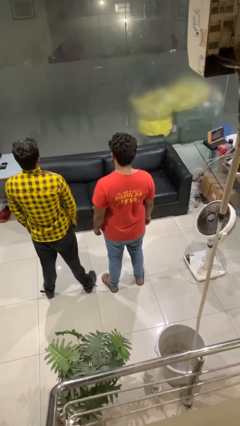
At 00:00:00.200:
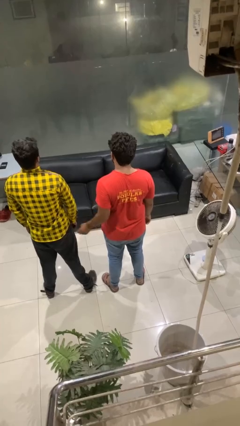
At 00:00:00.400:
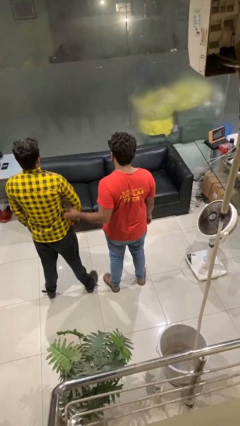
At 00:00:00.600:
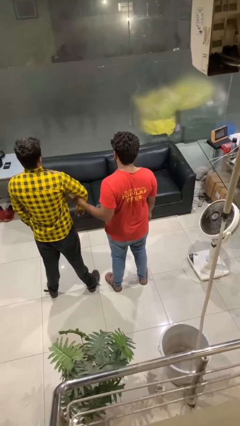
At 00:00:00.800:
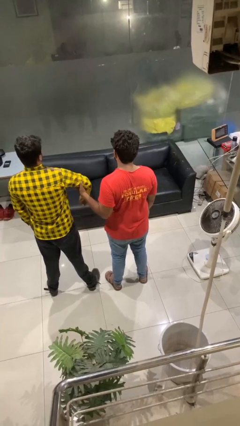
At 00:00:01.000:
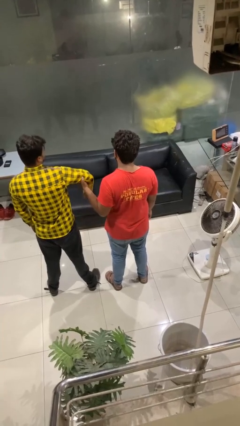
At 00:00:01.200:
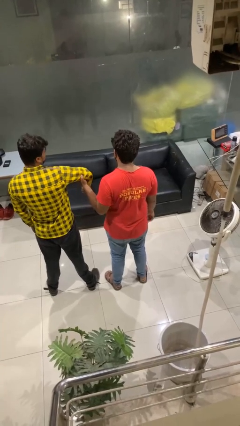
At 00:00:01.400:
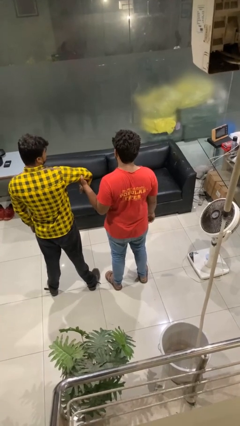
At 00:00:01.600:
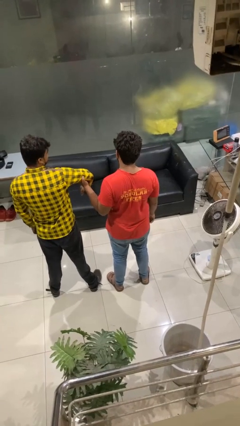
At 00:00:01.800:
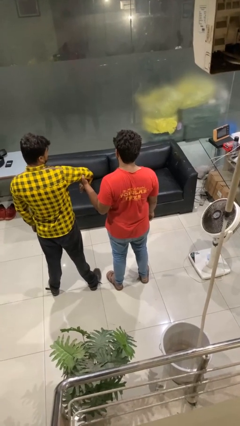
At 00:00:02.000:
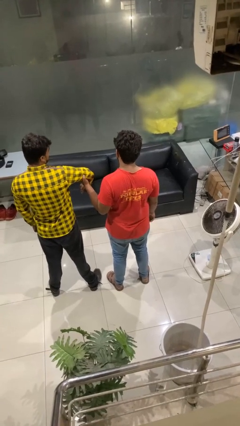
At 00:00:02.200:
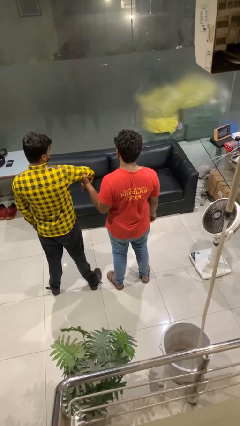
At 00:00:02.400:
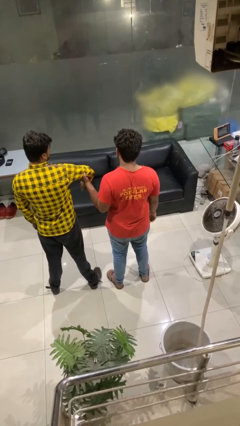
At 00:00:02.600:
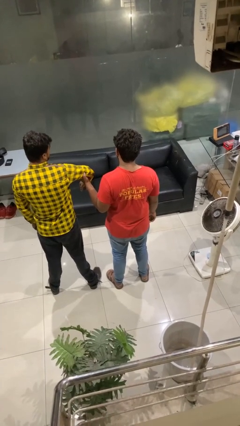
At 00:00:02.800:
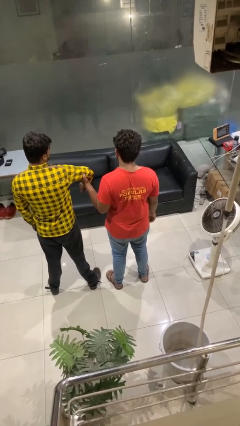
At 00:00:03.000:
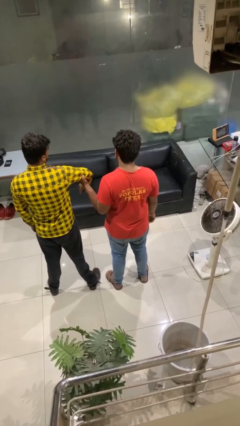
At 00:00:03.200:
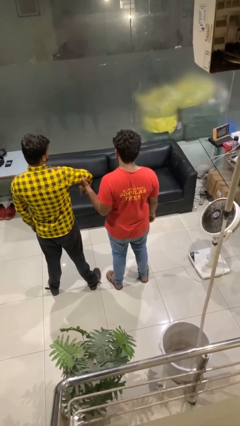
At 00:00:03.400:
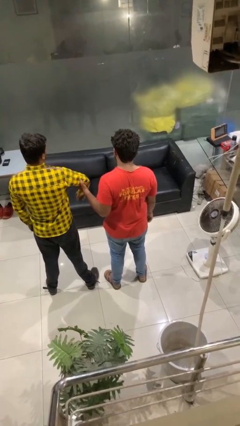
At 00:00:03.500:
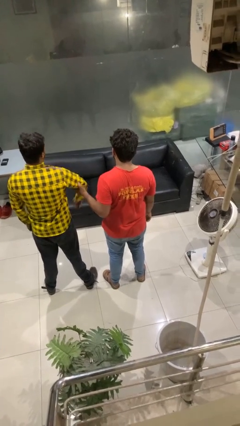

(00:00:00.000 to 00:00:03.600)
person grabs person by bicep

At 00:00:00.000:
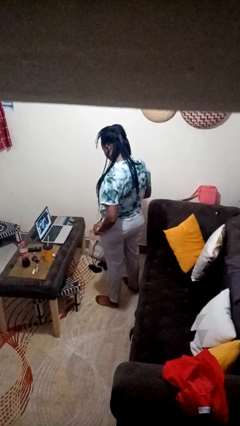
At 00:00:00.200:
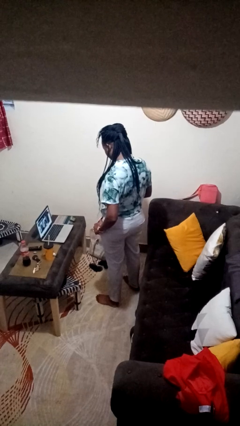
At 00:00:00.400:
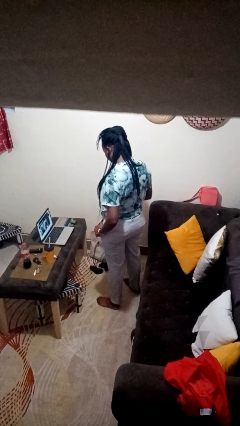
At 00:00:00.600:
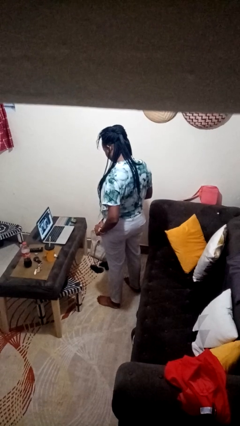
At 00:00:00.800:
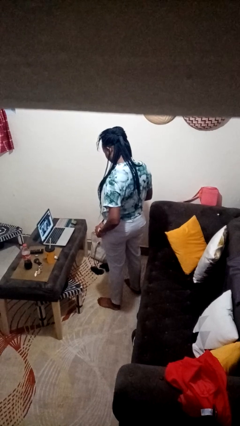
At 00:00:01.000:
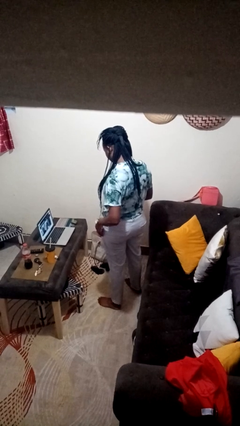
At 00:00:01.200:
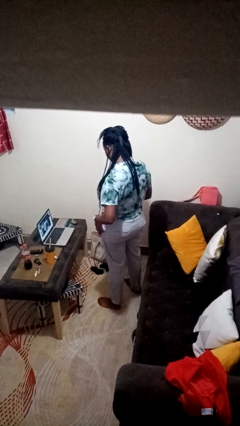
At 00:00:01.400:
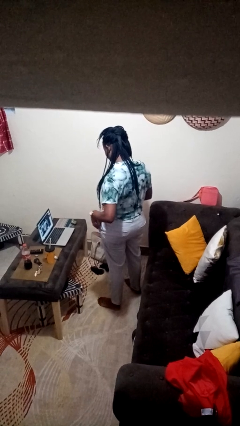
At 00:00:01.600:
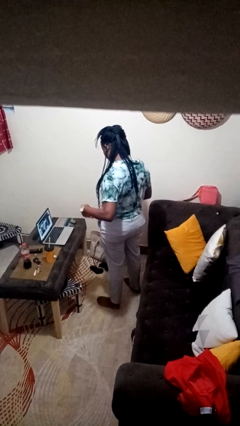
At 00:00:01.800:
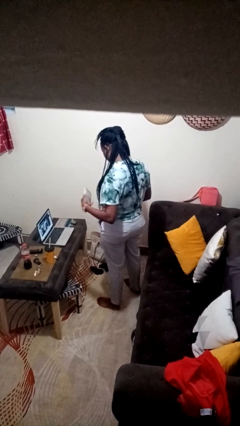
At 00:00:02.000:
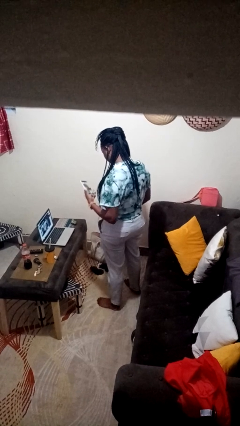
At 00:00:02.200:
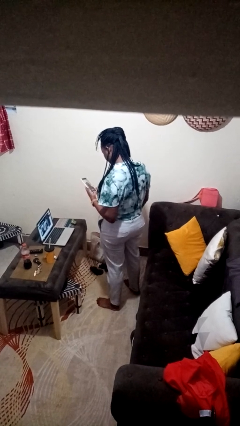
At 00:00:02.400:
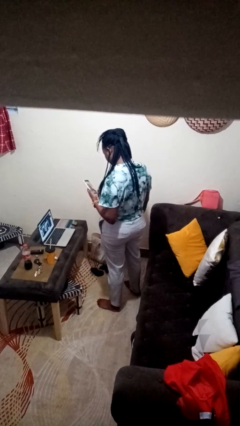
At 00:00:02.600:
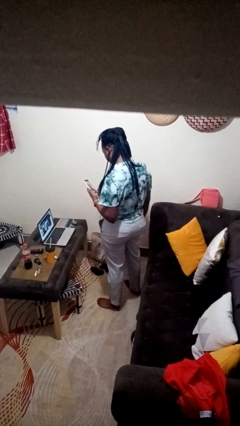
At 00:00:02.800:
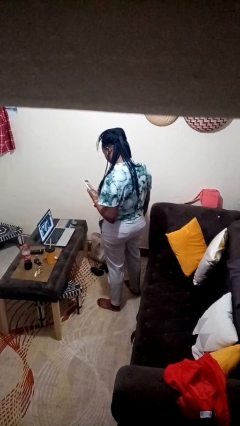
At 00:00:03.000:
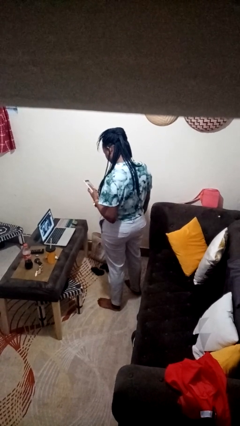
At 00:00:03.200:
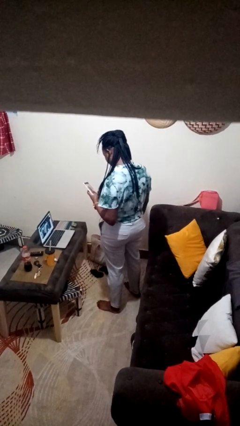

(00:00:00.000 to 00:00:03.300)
person takes phone from pocket

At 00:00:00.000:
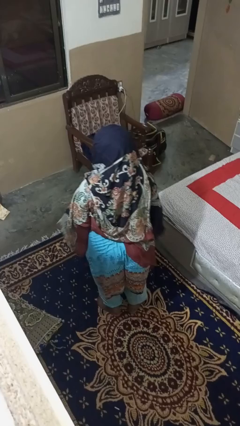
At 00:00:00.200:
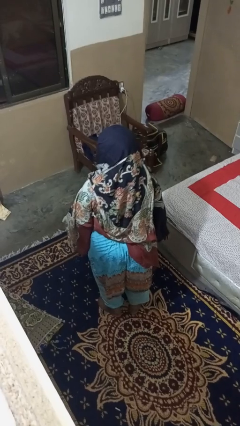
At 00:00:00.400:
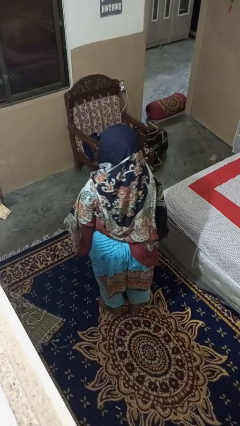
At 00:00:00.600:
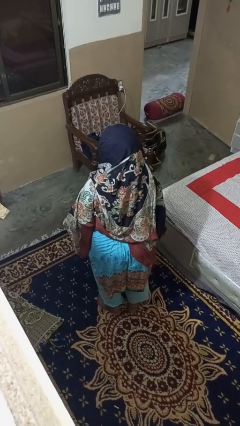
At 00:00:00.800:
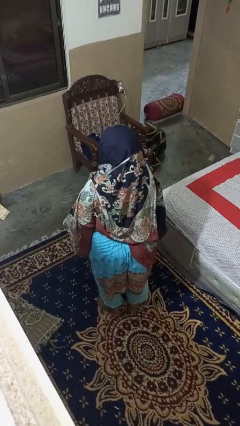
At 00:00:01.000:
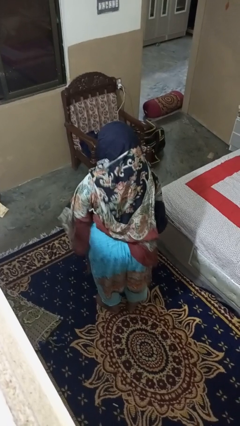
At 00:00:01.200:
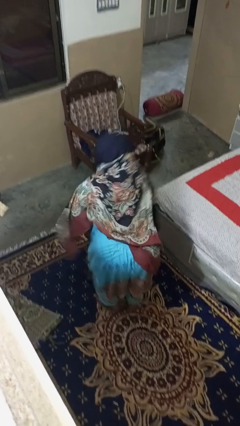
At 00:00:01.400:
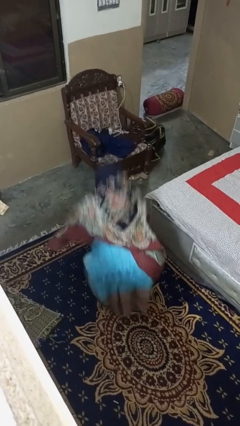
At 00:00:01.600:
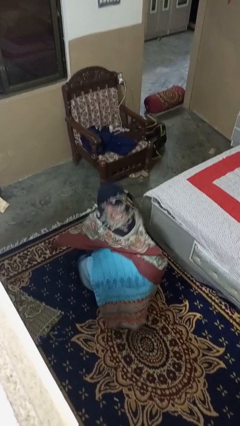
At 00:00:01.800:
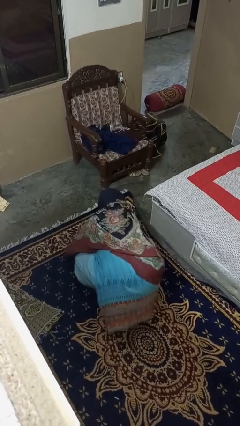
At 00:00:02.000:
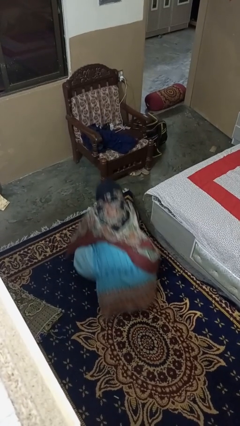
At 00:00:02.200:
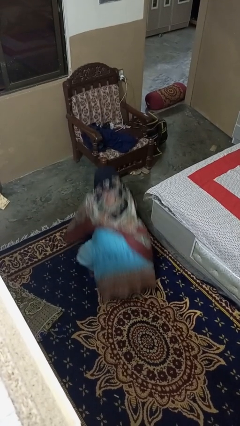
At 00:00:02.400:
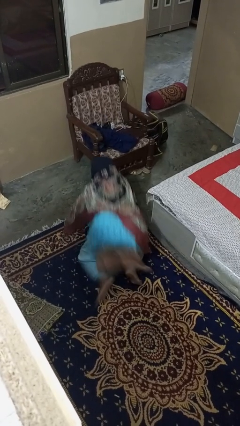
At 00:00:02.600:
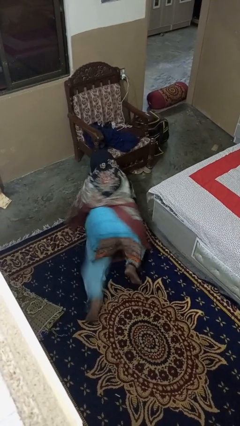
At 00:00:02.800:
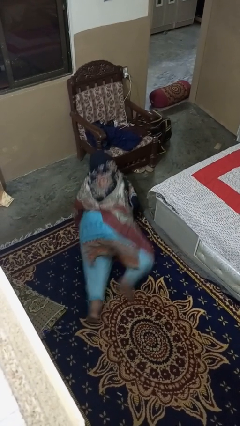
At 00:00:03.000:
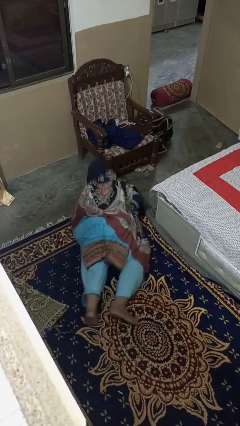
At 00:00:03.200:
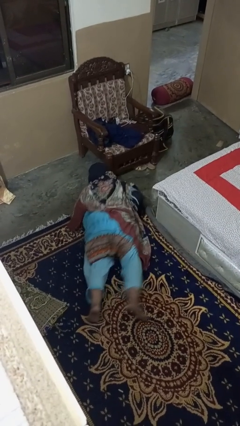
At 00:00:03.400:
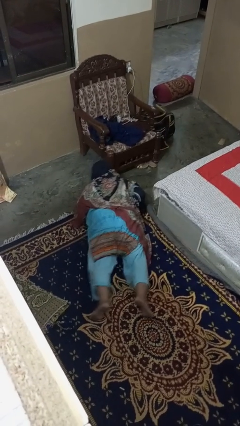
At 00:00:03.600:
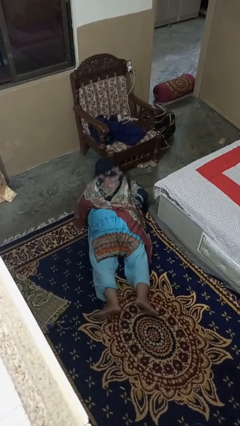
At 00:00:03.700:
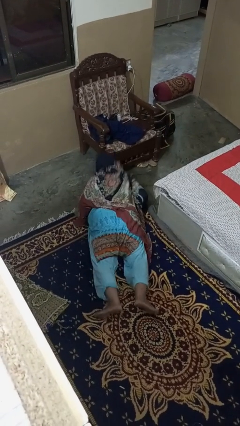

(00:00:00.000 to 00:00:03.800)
person exercises with pushup

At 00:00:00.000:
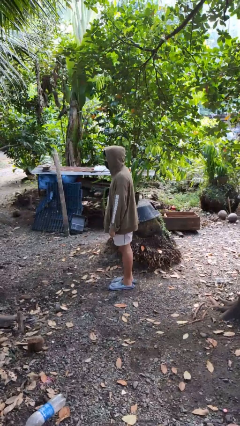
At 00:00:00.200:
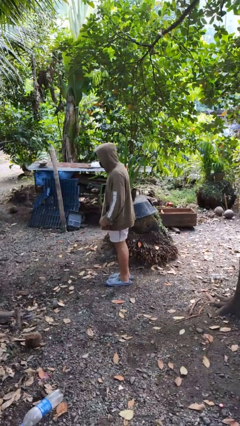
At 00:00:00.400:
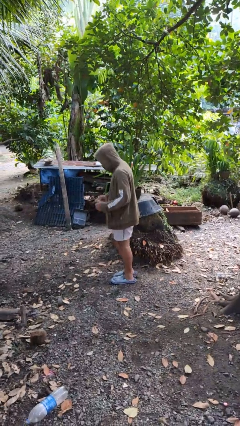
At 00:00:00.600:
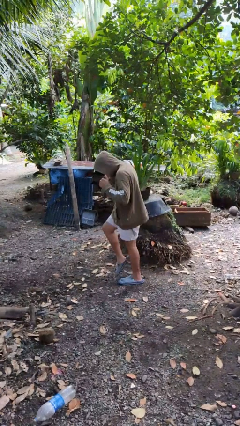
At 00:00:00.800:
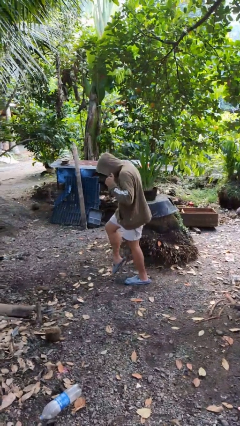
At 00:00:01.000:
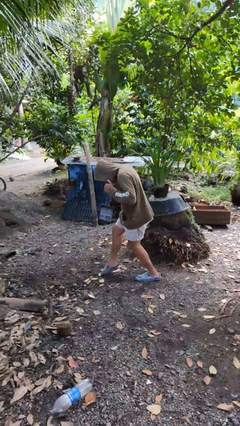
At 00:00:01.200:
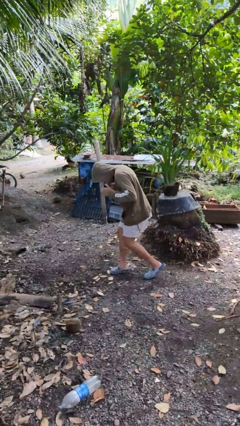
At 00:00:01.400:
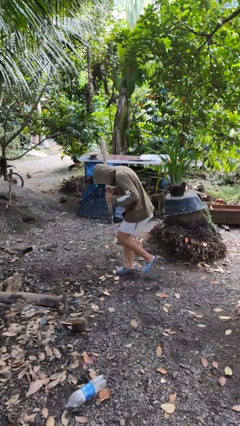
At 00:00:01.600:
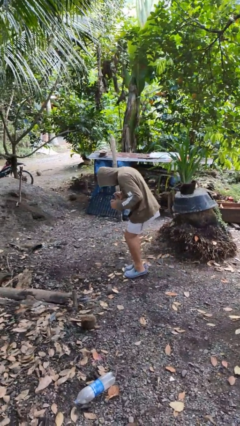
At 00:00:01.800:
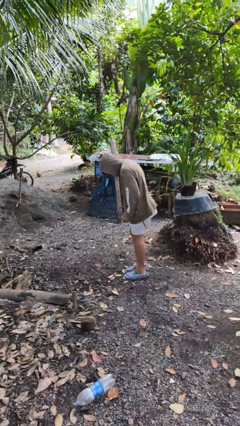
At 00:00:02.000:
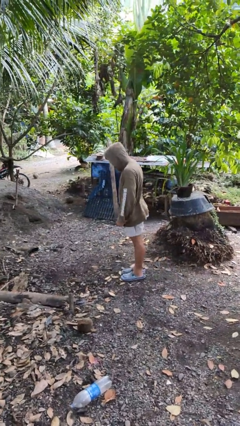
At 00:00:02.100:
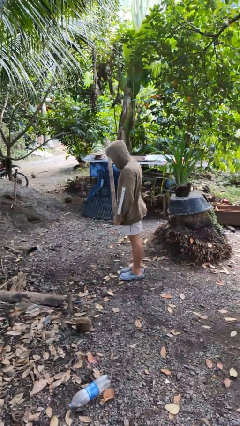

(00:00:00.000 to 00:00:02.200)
person walks tiptoe

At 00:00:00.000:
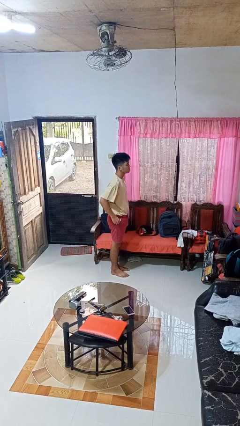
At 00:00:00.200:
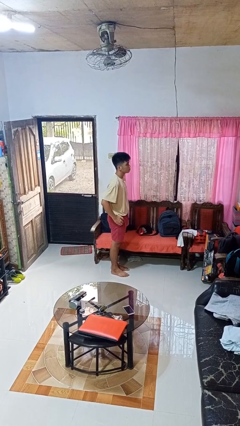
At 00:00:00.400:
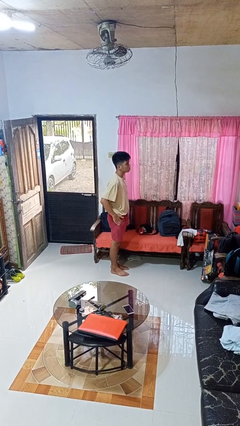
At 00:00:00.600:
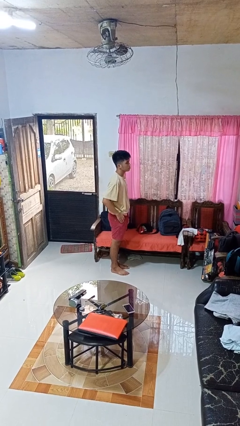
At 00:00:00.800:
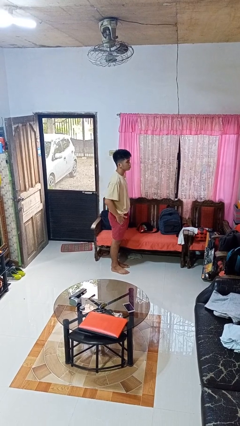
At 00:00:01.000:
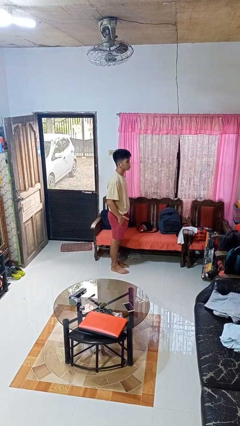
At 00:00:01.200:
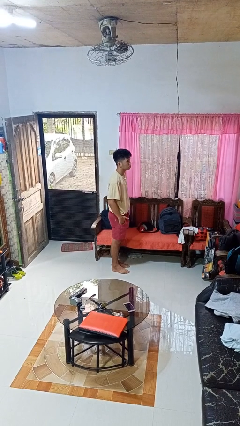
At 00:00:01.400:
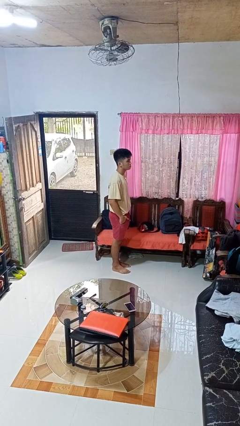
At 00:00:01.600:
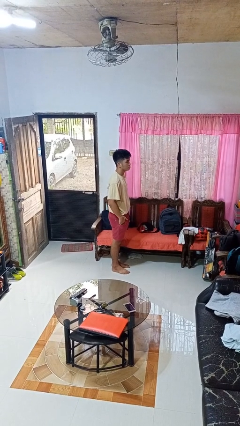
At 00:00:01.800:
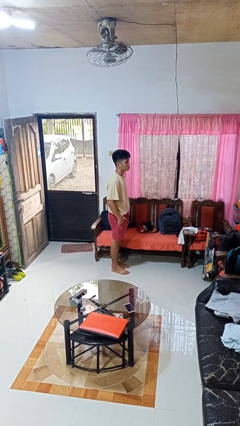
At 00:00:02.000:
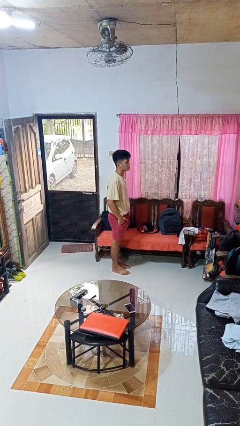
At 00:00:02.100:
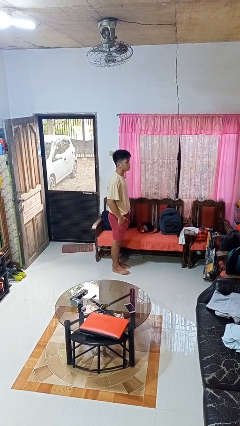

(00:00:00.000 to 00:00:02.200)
person puts hands in back pockets

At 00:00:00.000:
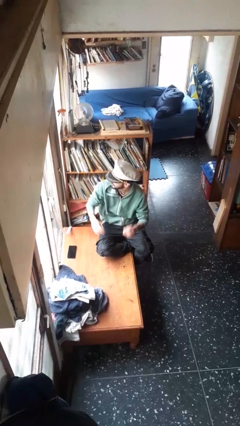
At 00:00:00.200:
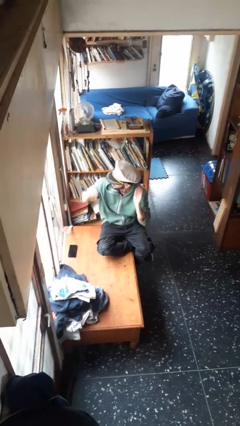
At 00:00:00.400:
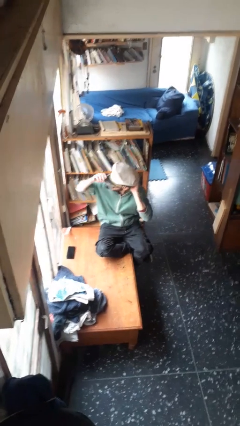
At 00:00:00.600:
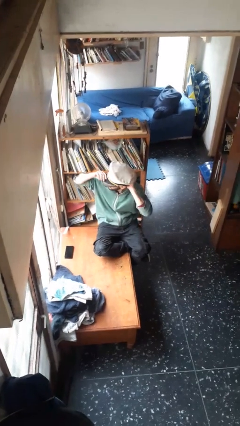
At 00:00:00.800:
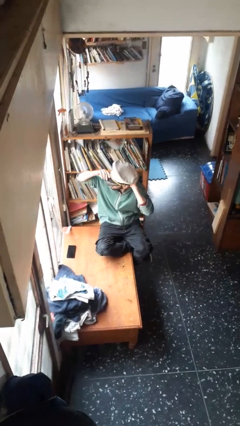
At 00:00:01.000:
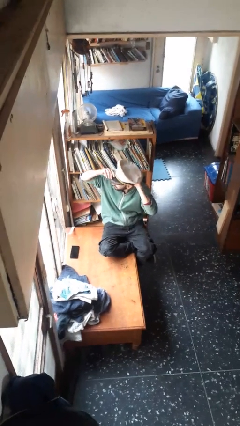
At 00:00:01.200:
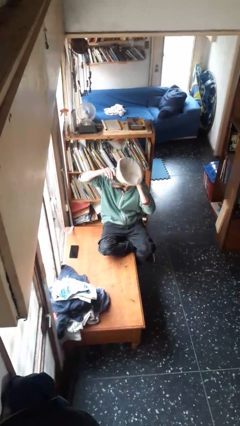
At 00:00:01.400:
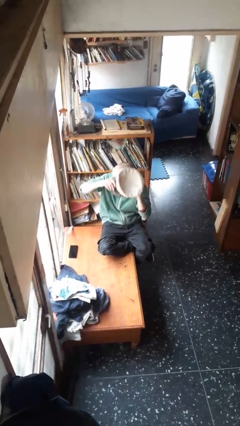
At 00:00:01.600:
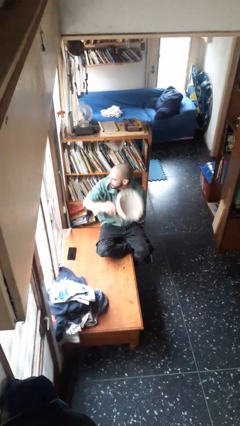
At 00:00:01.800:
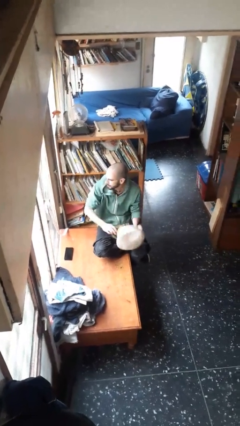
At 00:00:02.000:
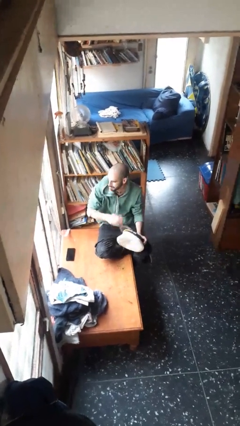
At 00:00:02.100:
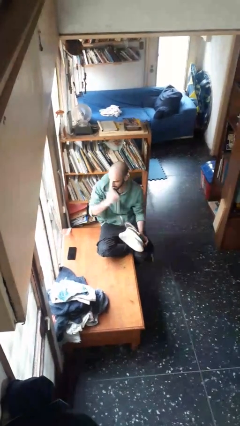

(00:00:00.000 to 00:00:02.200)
person takes off hat
